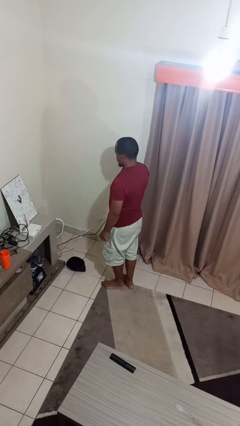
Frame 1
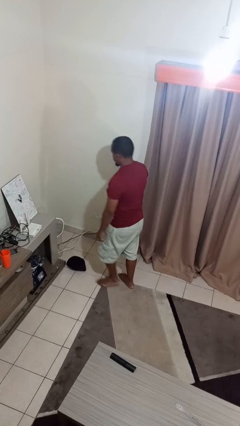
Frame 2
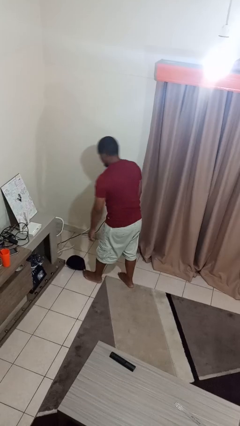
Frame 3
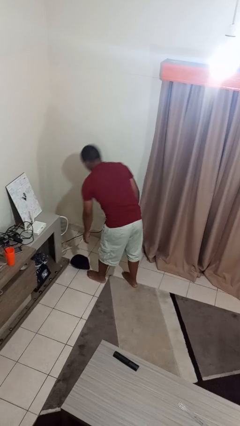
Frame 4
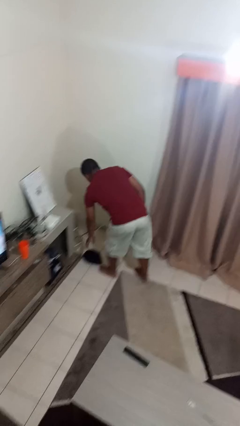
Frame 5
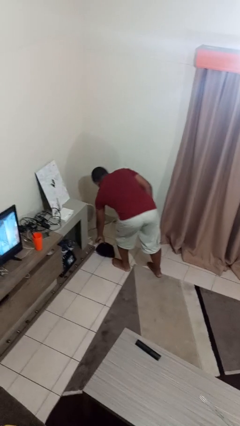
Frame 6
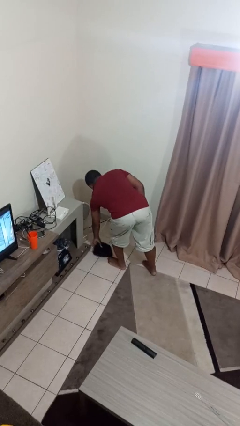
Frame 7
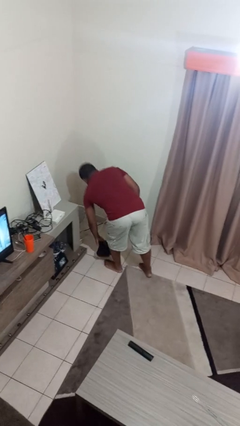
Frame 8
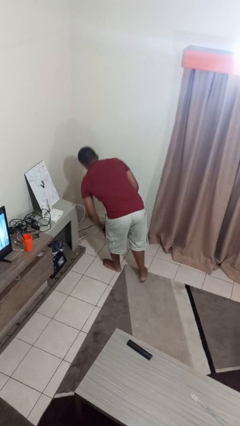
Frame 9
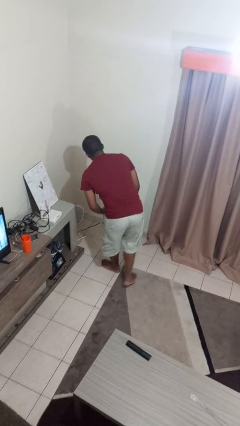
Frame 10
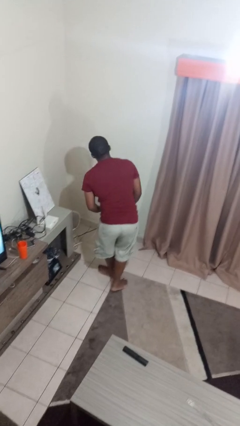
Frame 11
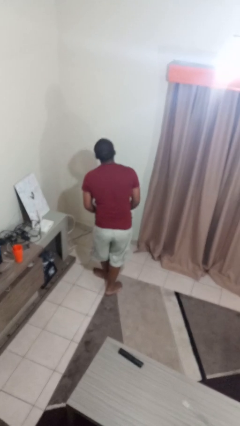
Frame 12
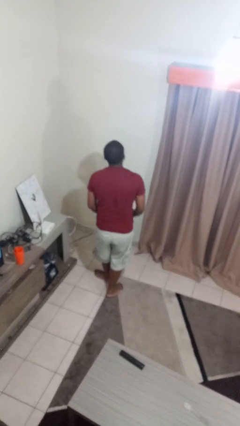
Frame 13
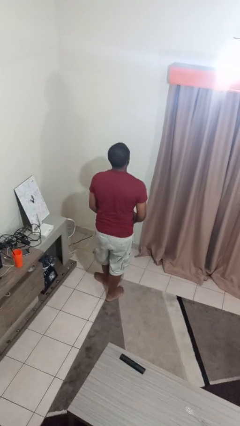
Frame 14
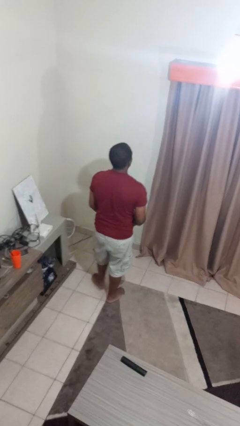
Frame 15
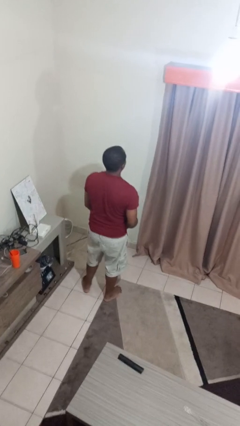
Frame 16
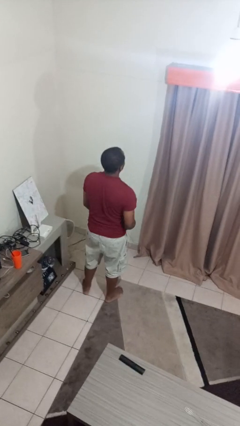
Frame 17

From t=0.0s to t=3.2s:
person picks up object from floor

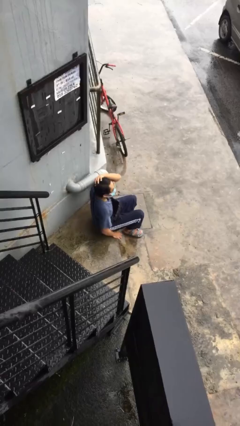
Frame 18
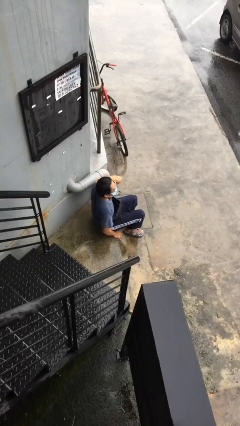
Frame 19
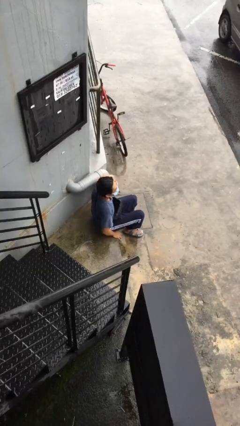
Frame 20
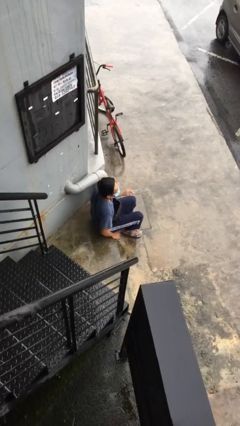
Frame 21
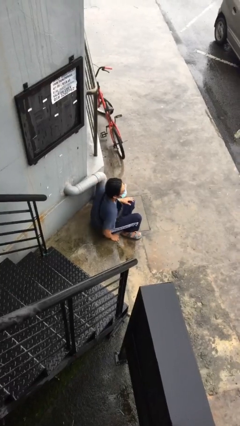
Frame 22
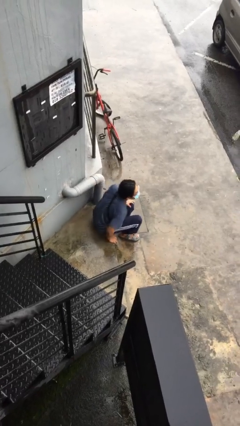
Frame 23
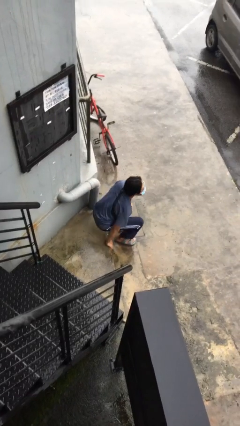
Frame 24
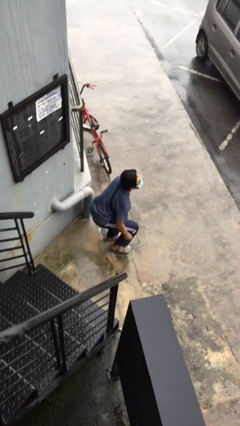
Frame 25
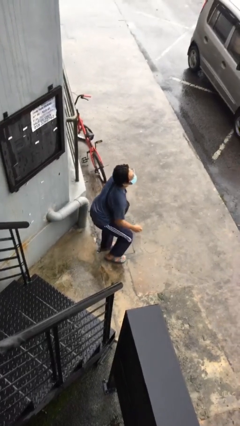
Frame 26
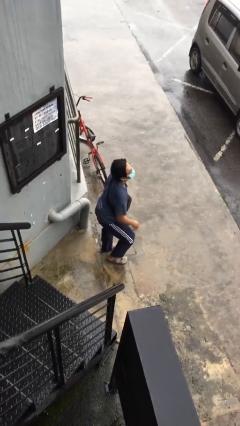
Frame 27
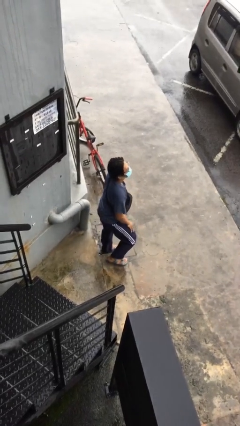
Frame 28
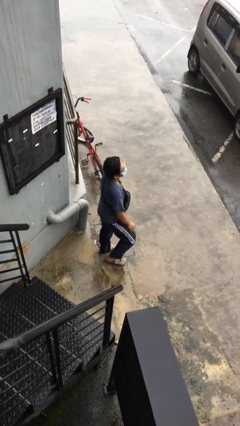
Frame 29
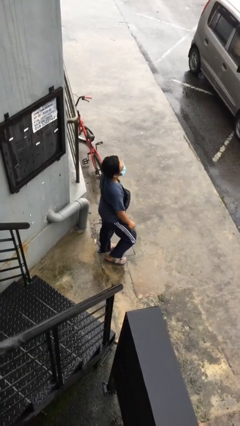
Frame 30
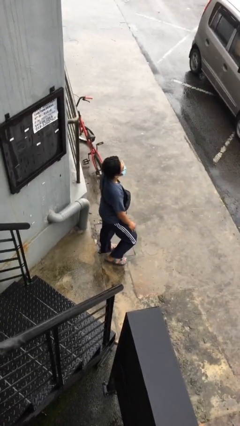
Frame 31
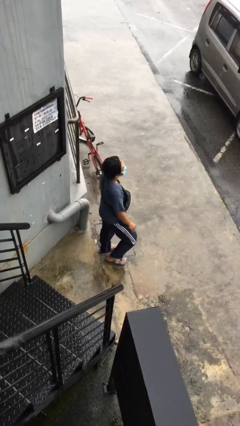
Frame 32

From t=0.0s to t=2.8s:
person stands up

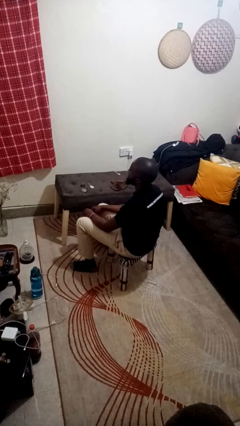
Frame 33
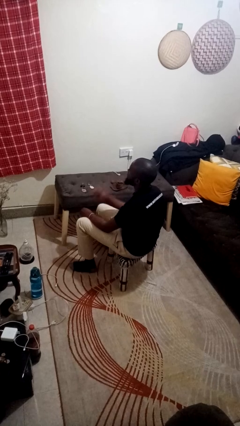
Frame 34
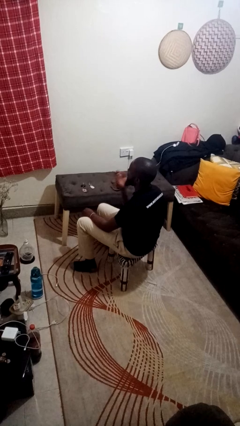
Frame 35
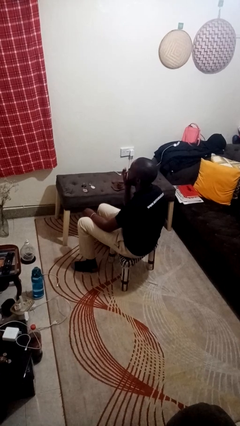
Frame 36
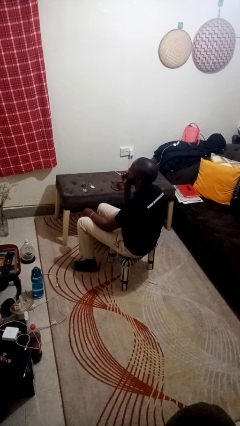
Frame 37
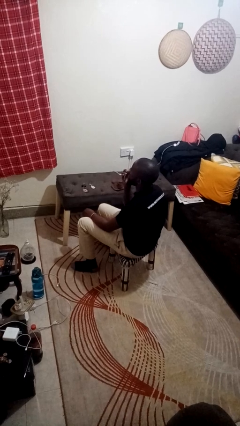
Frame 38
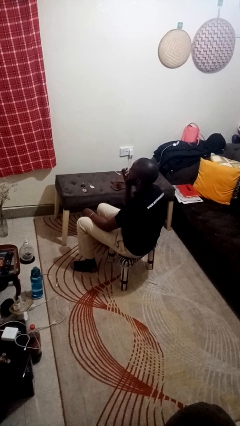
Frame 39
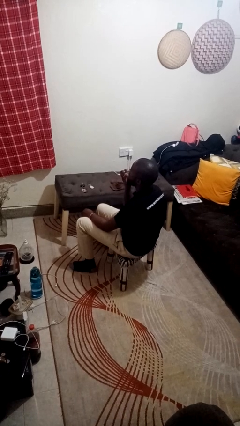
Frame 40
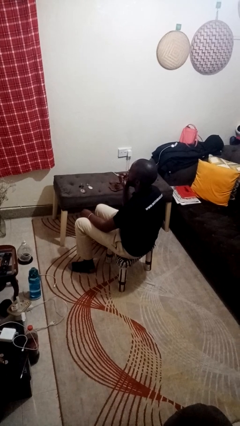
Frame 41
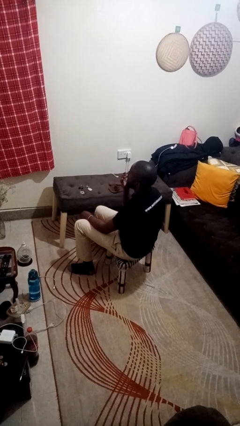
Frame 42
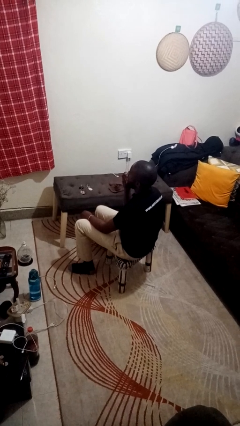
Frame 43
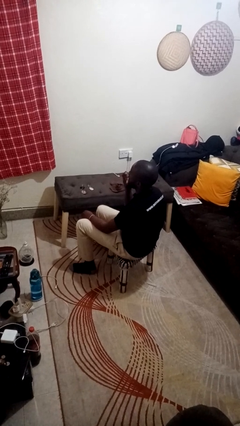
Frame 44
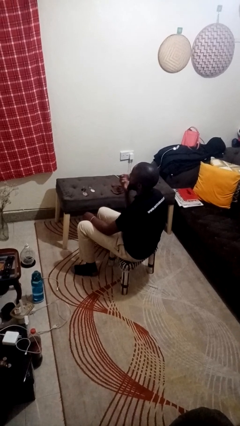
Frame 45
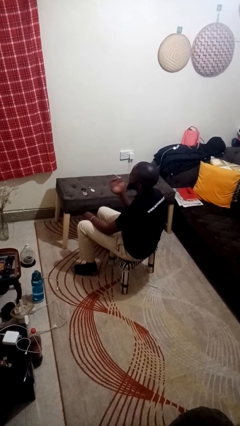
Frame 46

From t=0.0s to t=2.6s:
person licks fingers

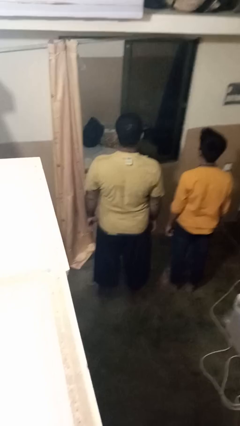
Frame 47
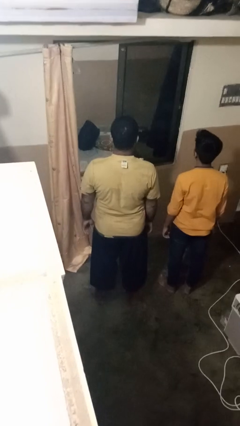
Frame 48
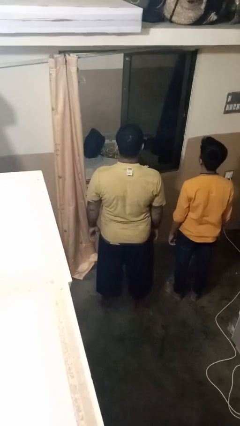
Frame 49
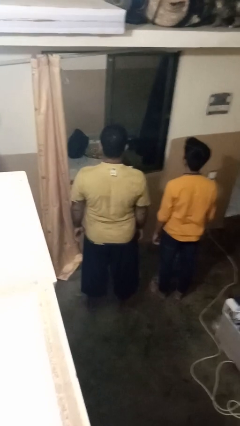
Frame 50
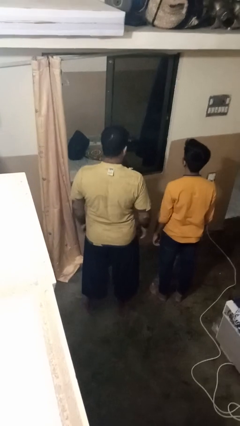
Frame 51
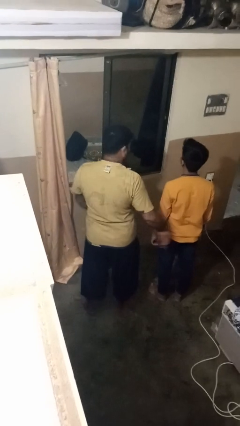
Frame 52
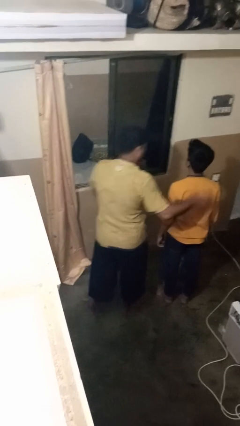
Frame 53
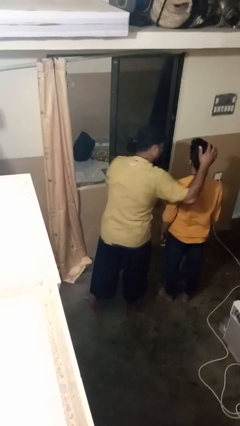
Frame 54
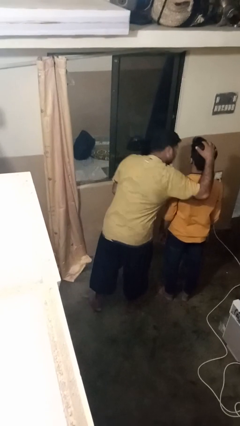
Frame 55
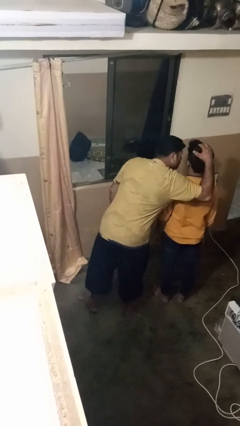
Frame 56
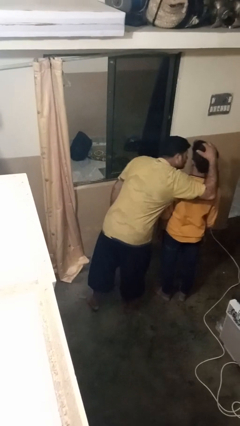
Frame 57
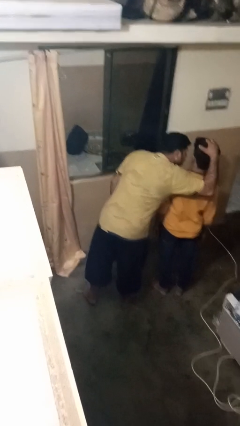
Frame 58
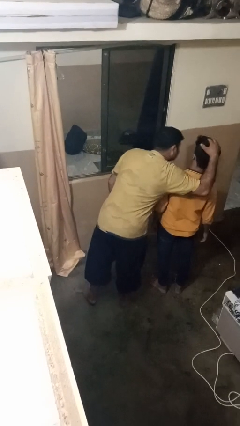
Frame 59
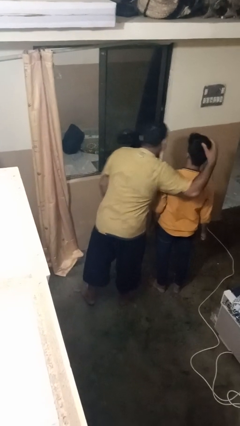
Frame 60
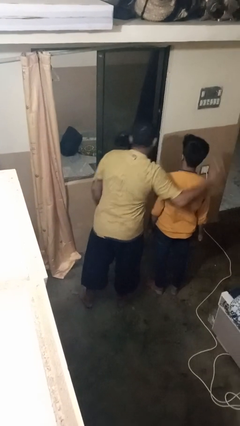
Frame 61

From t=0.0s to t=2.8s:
person kisses cheek of person

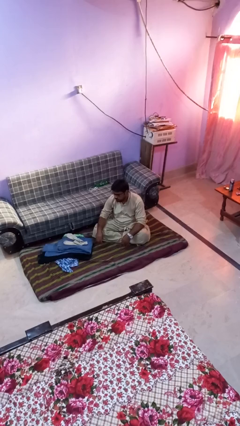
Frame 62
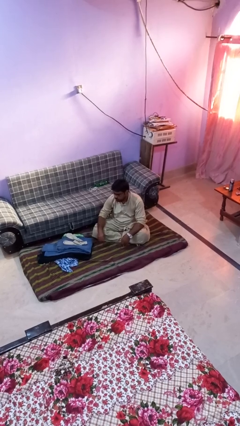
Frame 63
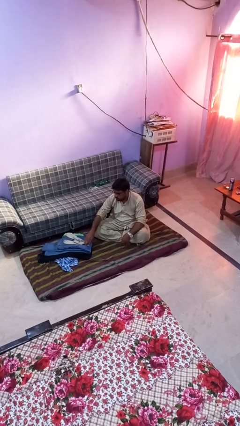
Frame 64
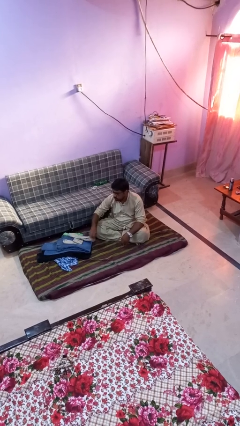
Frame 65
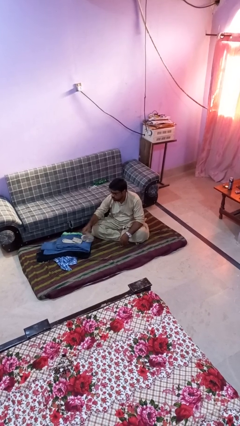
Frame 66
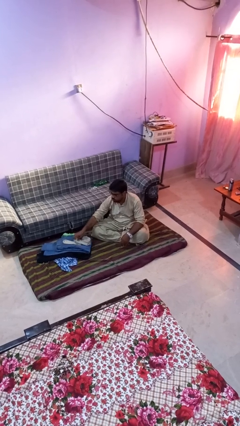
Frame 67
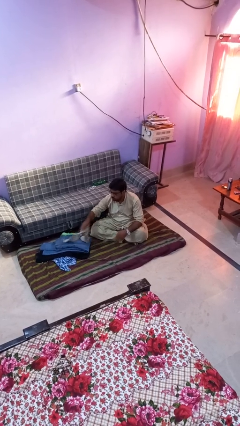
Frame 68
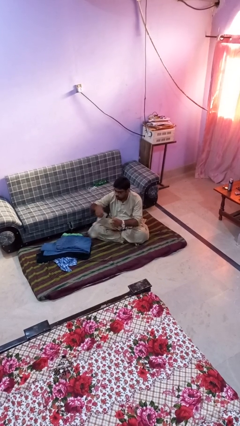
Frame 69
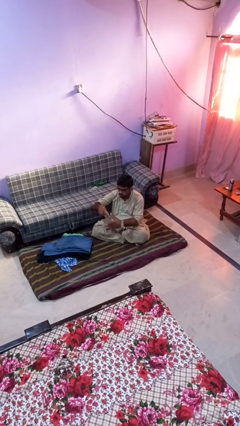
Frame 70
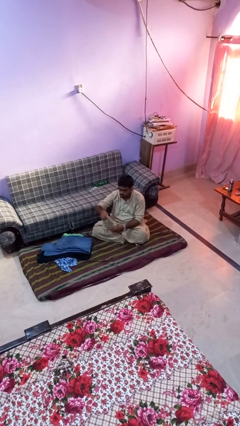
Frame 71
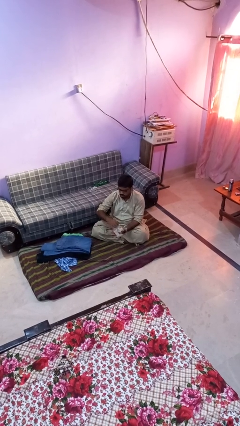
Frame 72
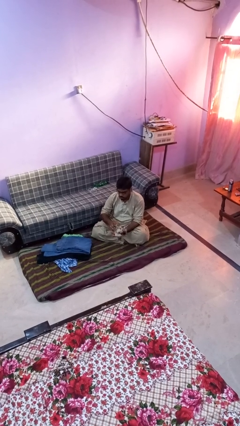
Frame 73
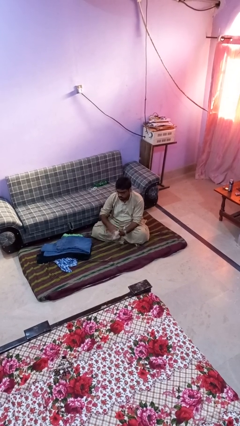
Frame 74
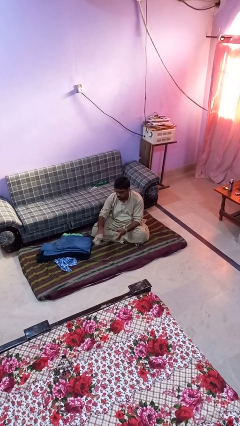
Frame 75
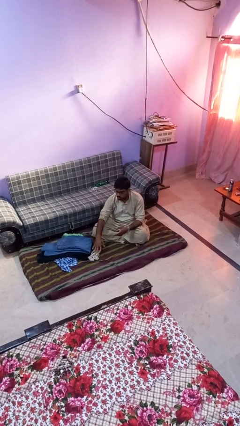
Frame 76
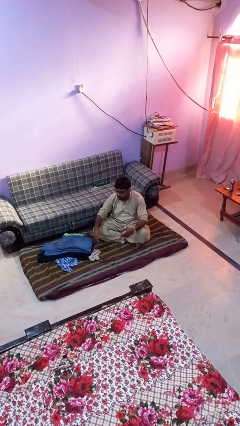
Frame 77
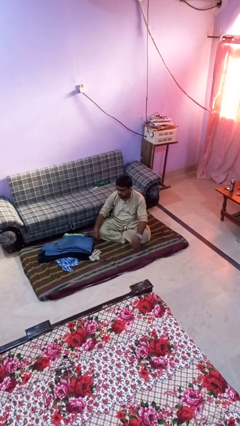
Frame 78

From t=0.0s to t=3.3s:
person folds socks

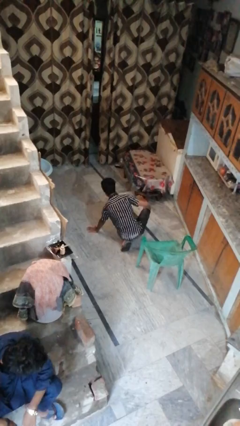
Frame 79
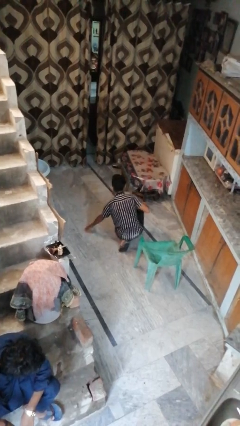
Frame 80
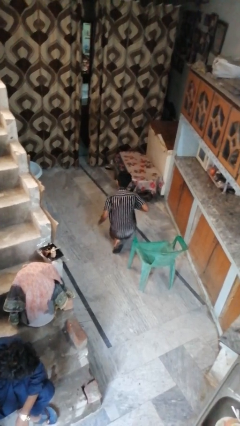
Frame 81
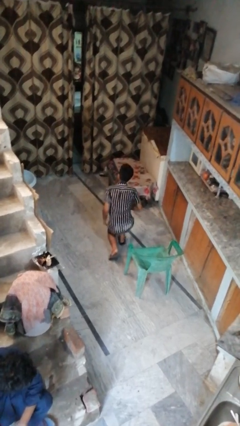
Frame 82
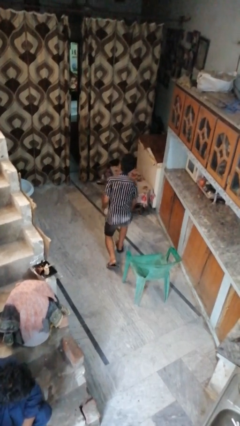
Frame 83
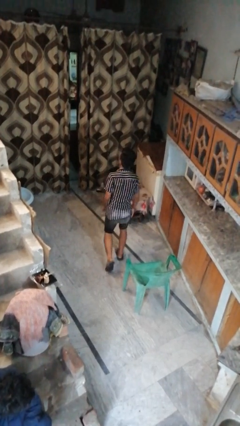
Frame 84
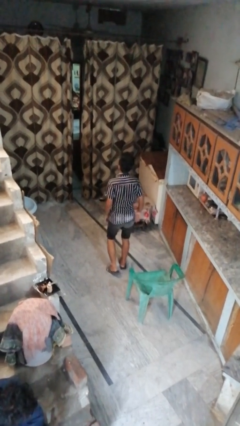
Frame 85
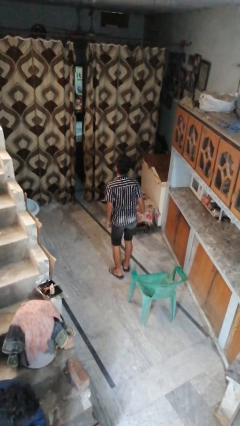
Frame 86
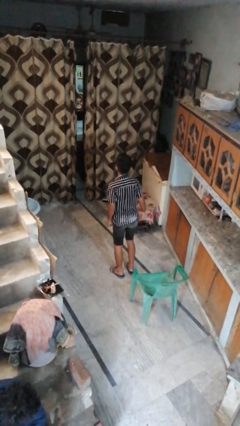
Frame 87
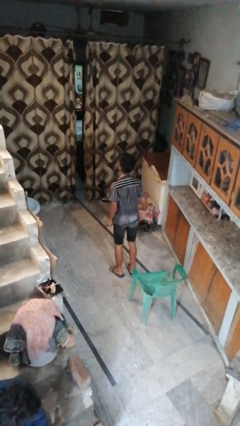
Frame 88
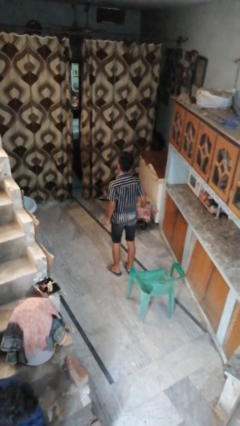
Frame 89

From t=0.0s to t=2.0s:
person stands up from floor

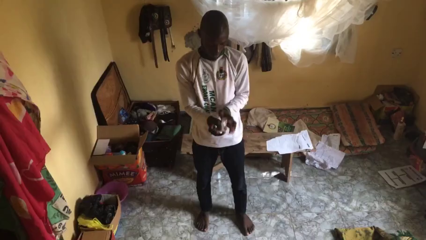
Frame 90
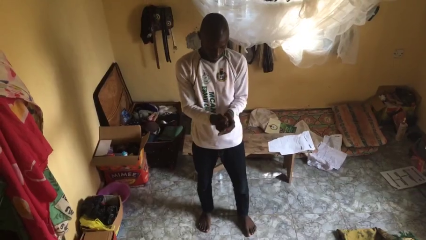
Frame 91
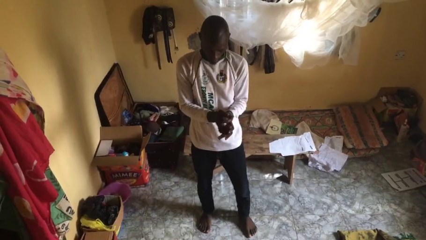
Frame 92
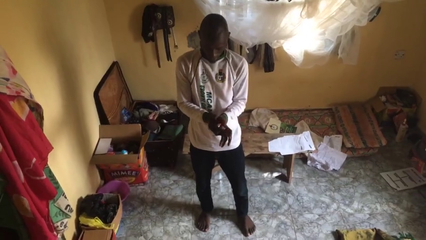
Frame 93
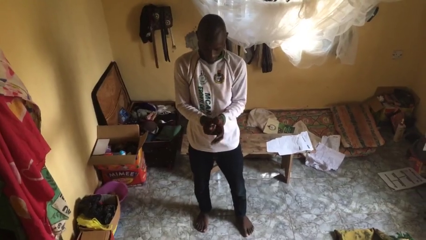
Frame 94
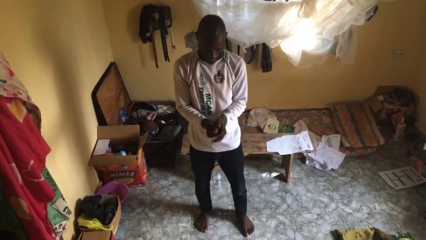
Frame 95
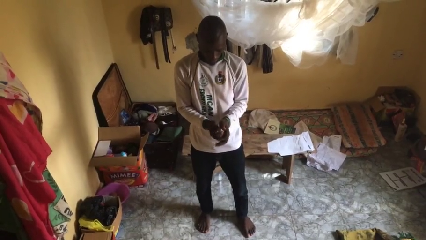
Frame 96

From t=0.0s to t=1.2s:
person crumples paper
